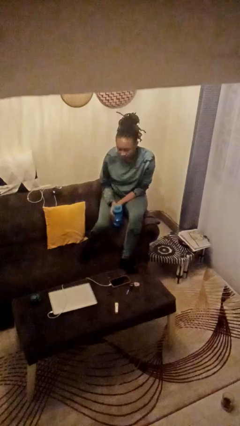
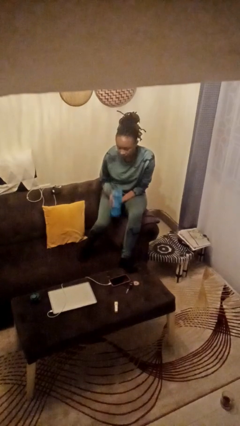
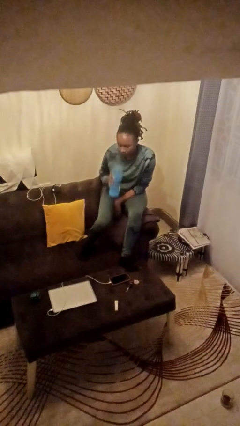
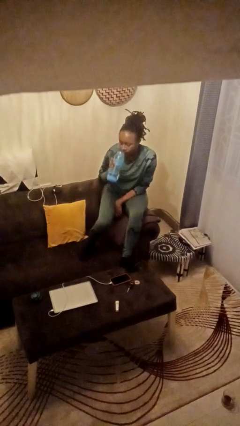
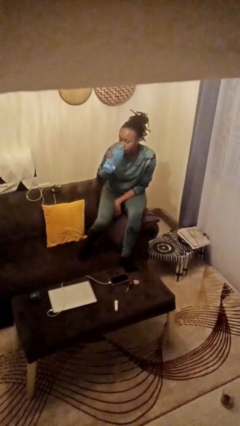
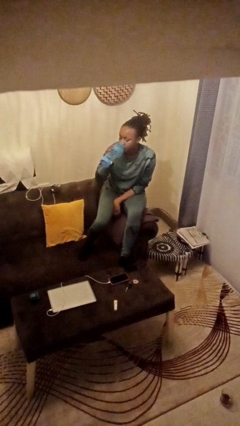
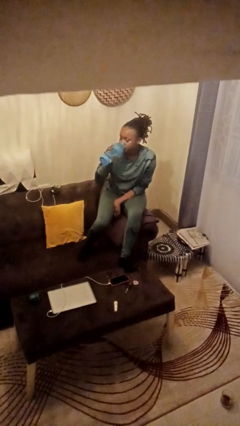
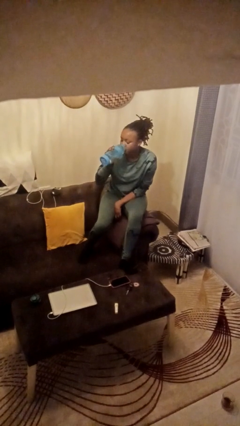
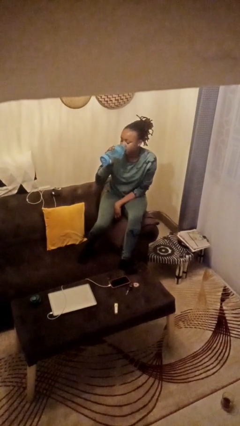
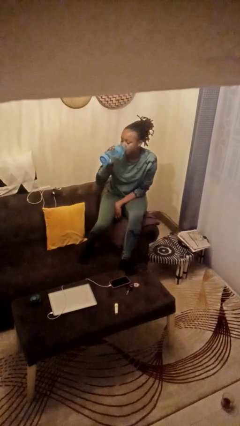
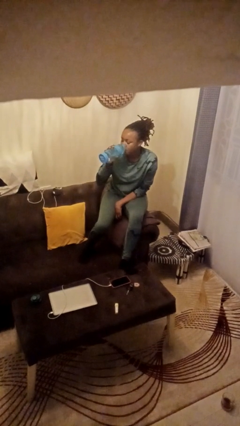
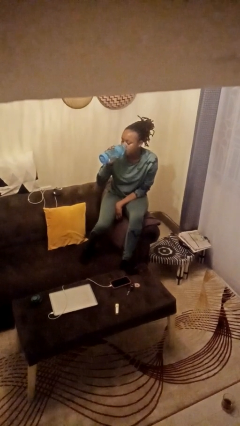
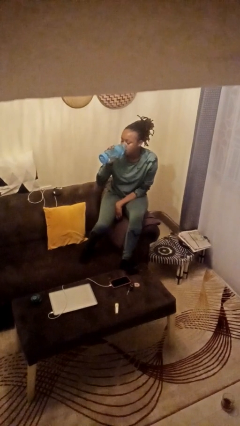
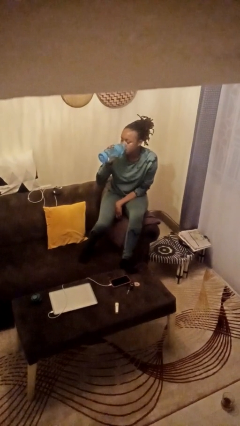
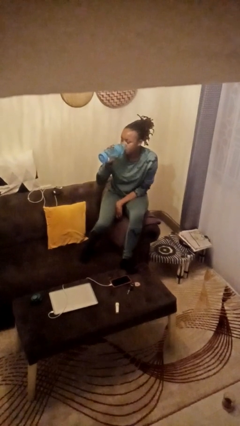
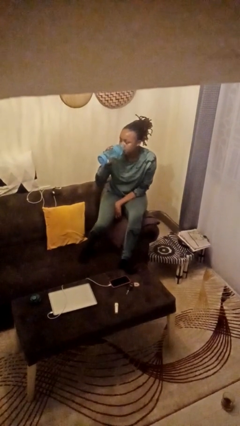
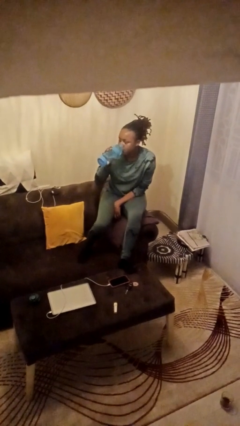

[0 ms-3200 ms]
person drinks from bottle

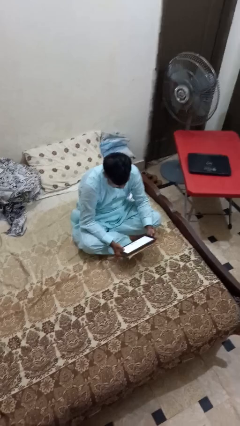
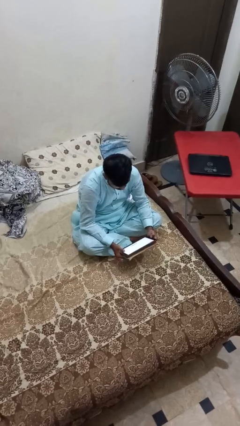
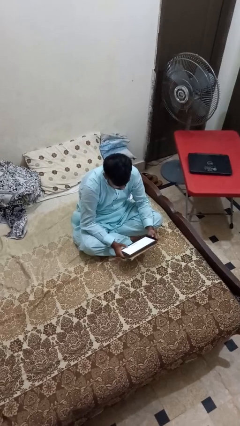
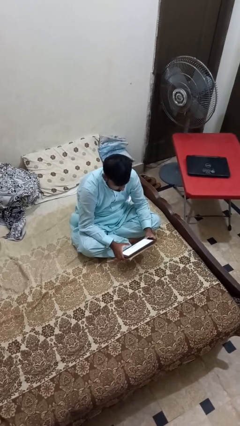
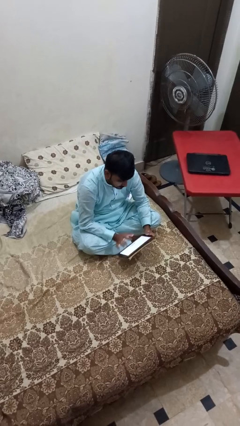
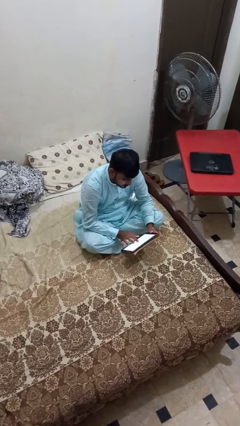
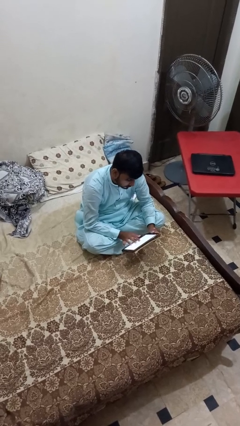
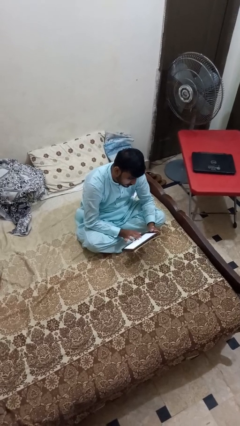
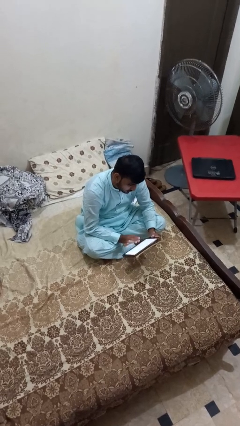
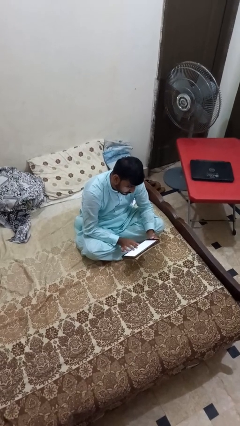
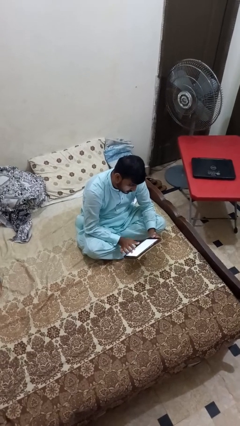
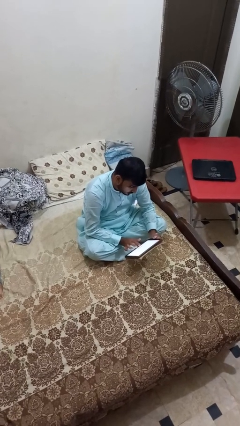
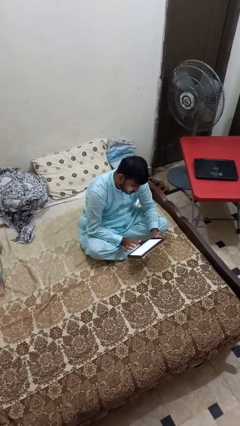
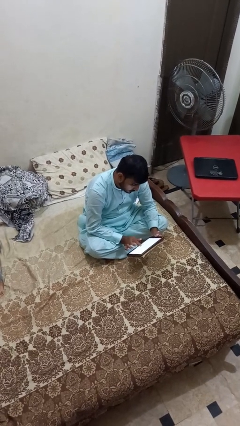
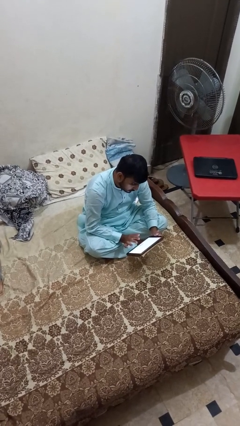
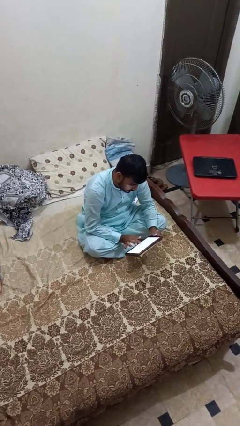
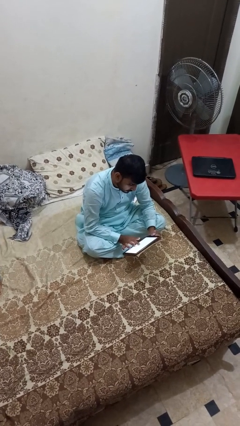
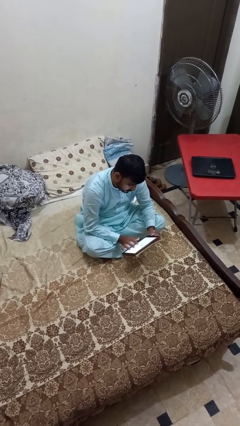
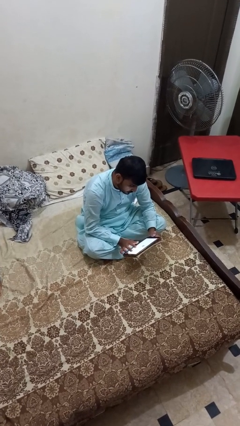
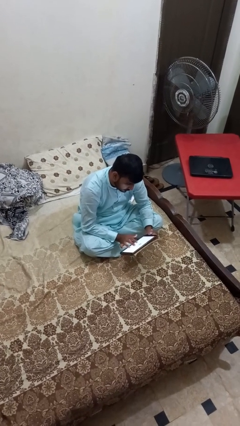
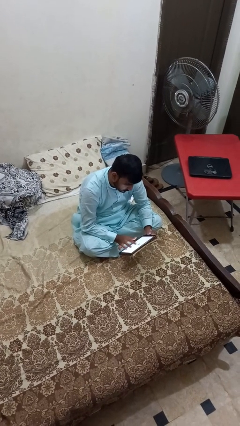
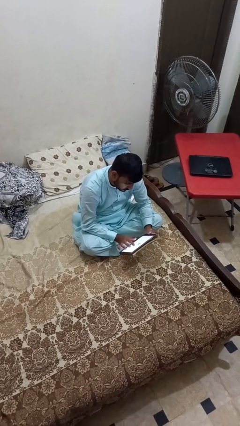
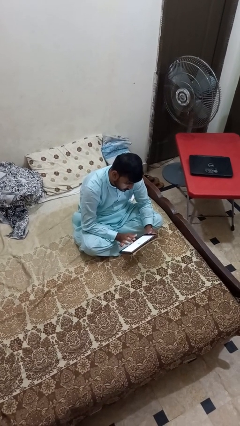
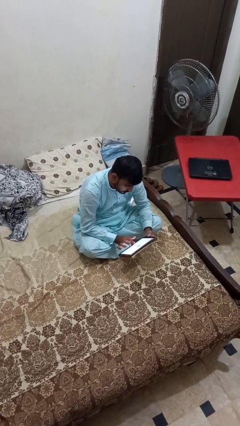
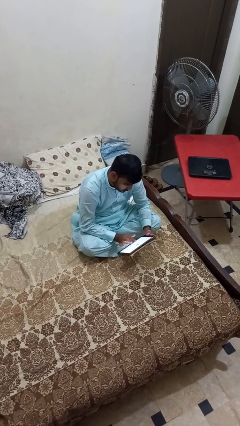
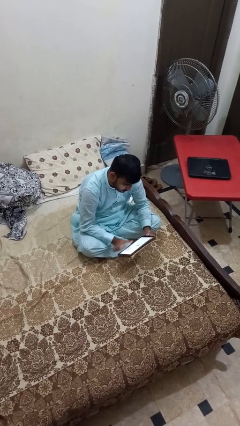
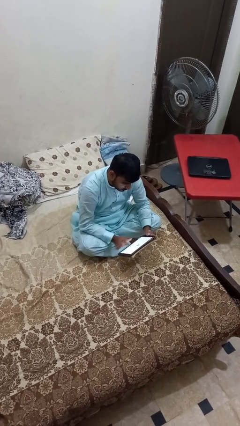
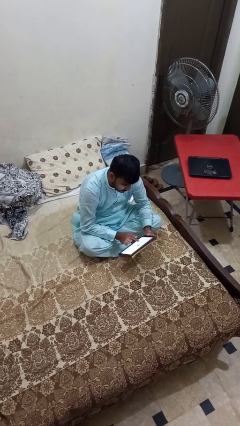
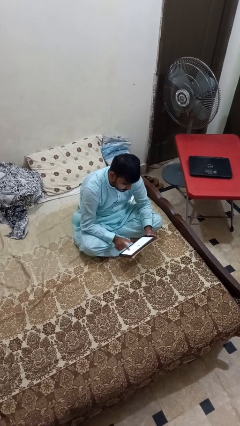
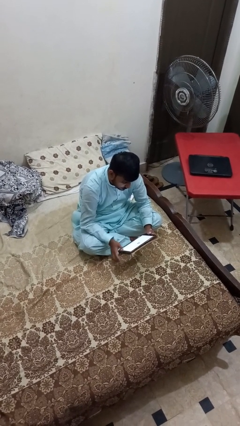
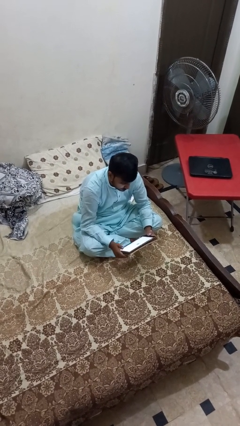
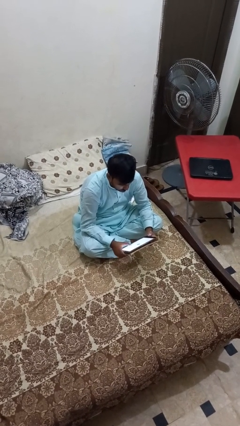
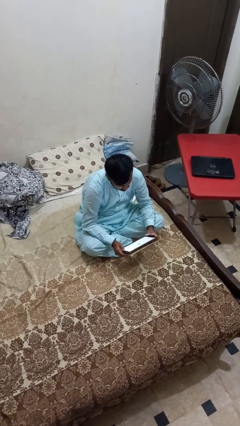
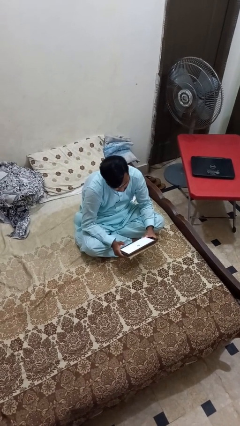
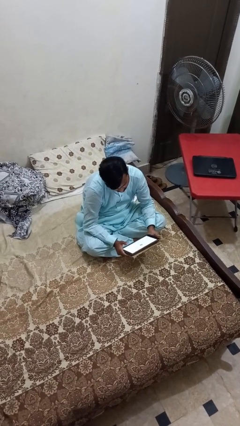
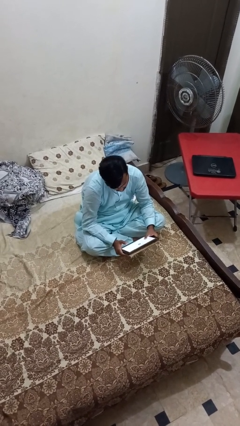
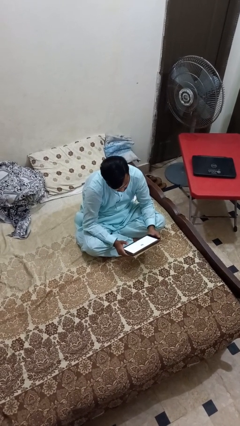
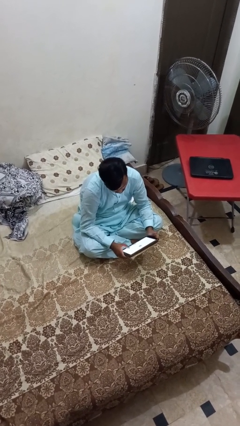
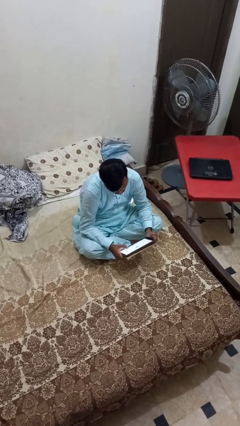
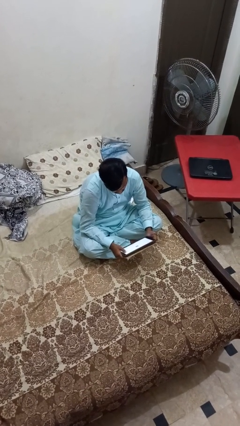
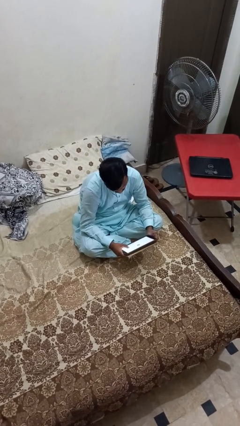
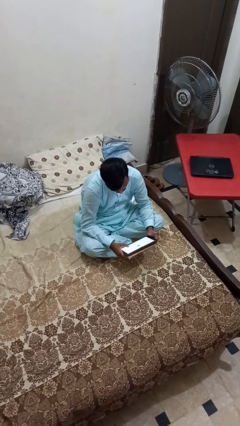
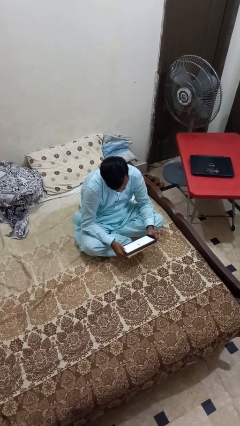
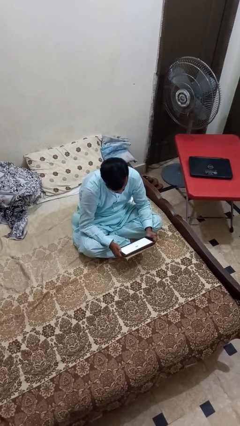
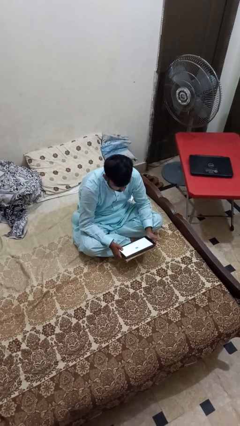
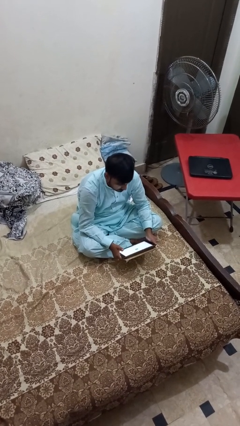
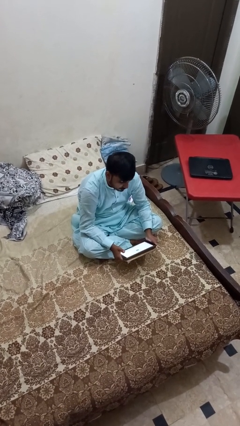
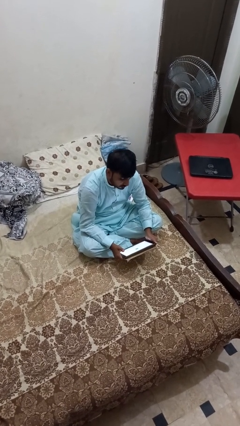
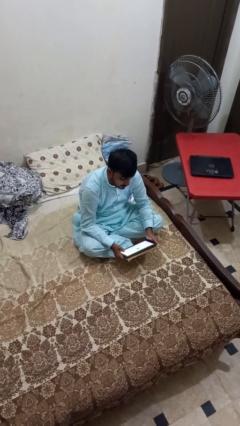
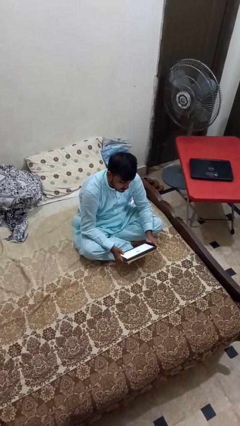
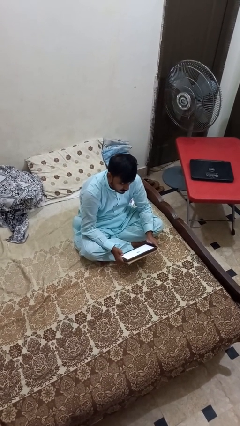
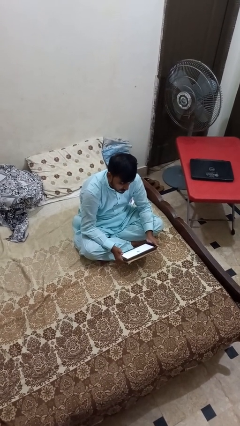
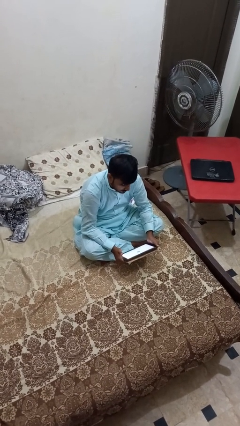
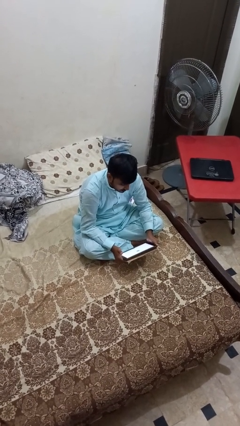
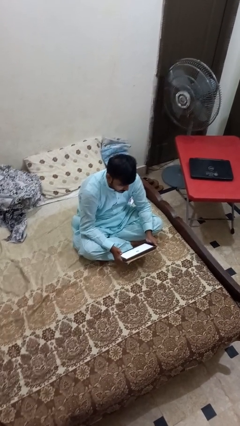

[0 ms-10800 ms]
person interacts with tablet

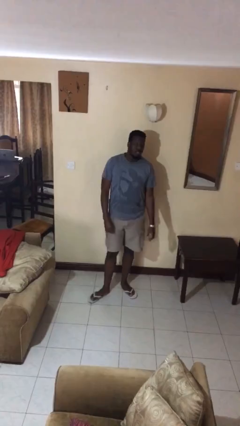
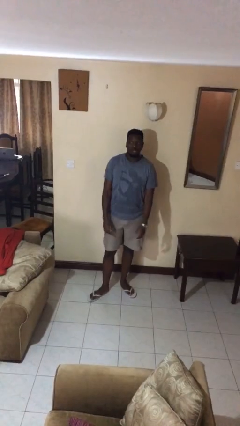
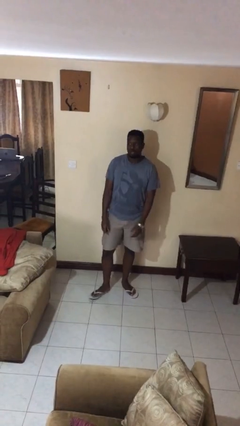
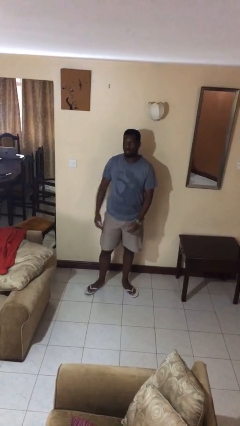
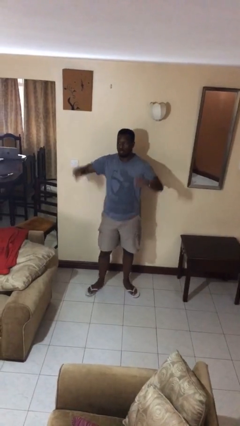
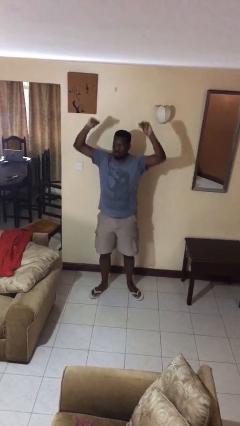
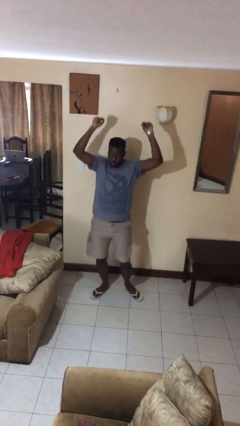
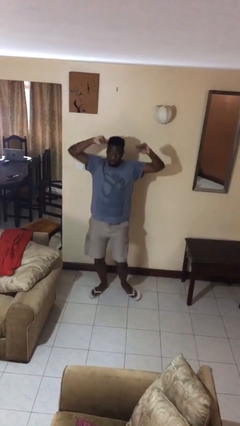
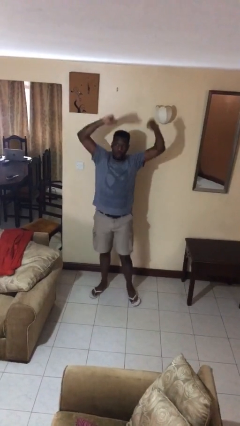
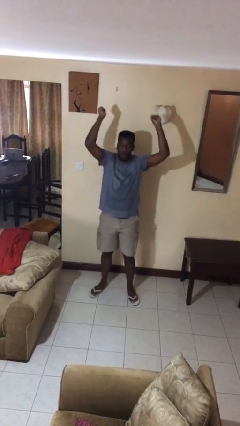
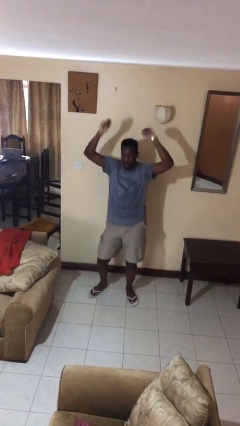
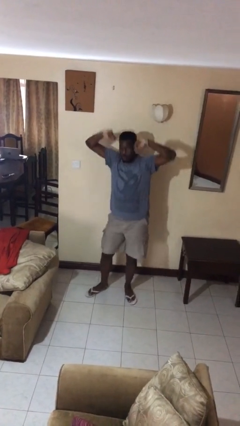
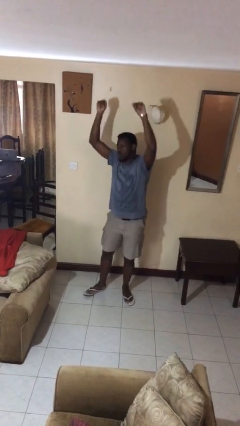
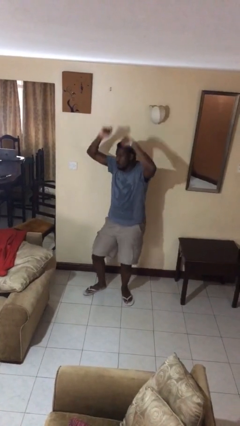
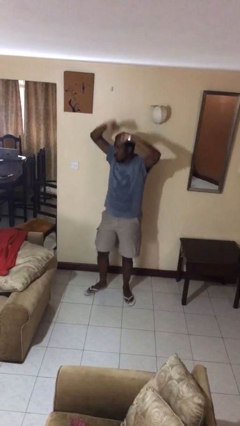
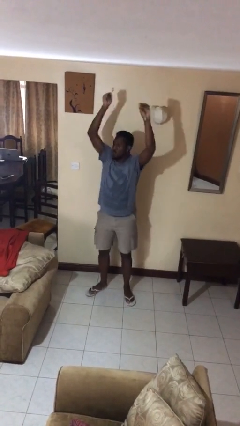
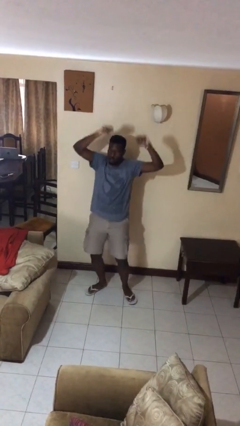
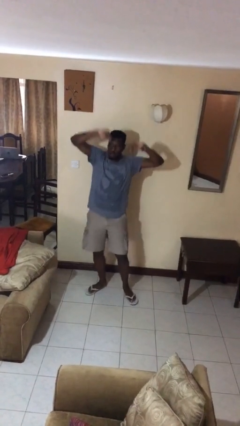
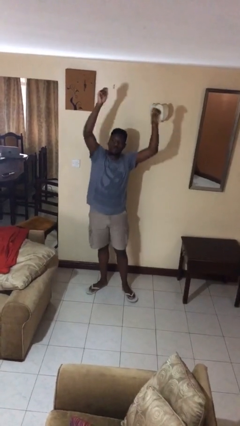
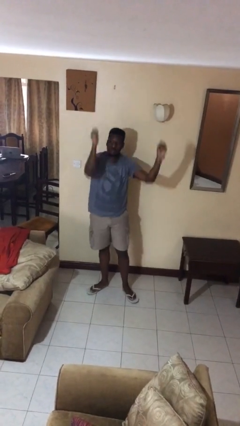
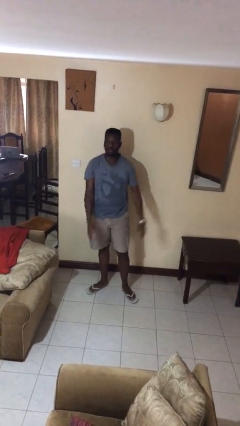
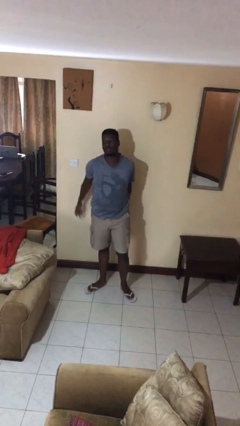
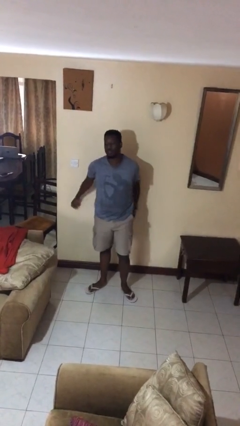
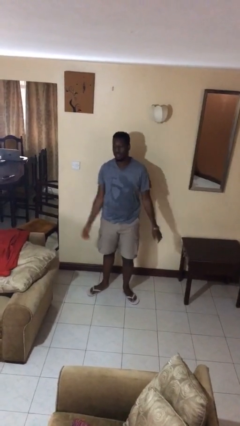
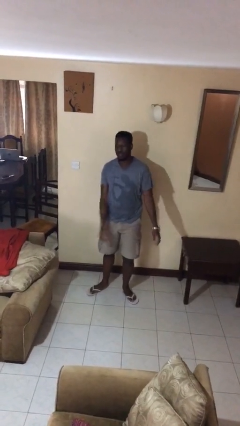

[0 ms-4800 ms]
person dances in place
